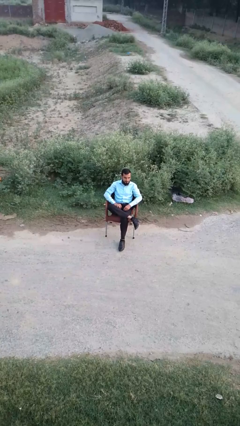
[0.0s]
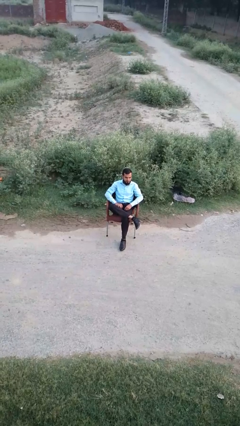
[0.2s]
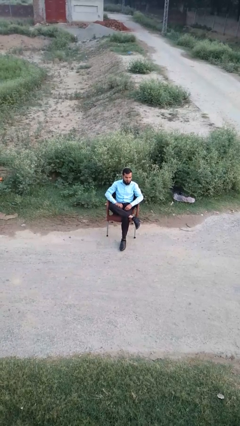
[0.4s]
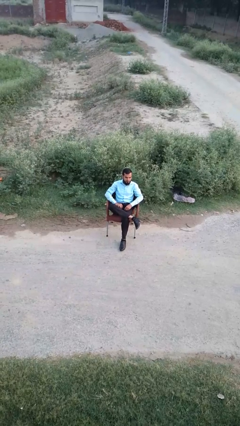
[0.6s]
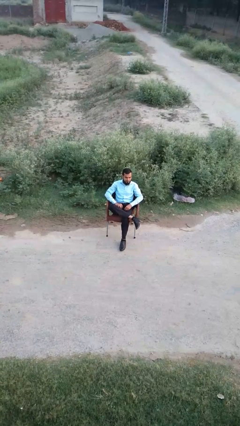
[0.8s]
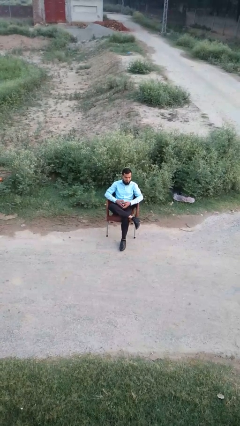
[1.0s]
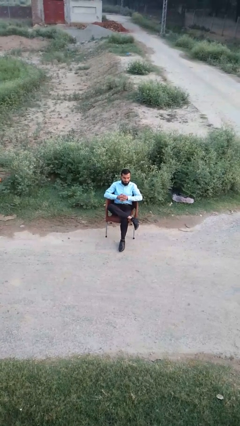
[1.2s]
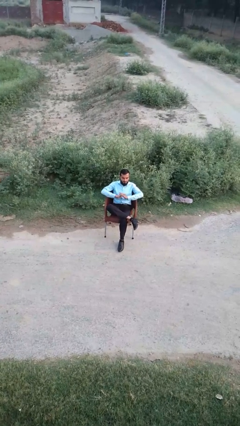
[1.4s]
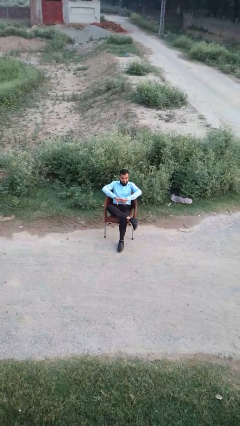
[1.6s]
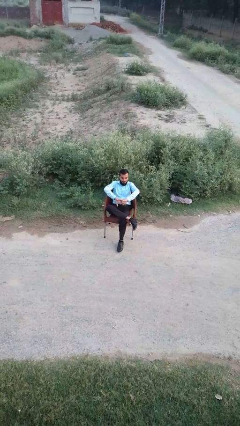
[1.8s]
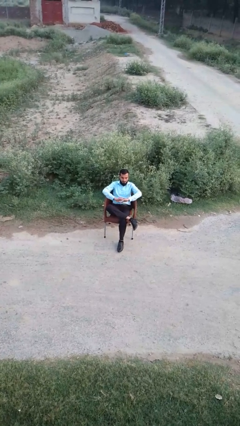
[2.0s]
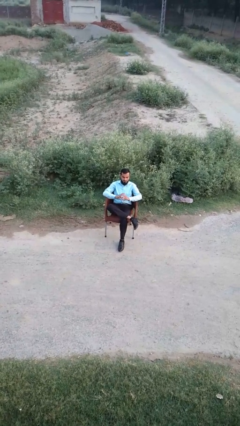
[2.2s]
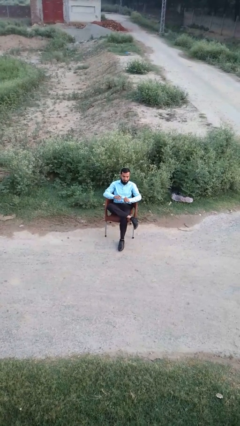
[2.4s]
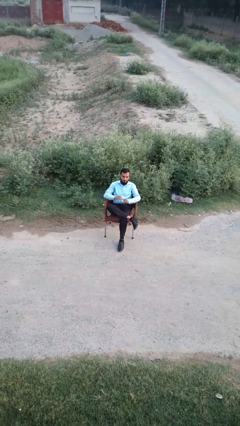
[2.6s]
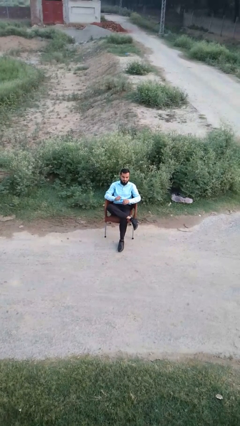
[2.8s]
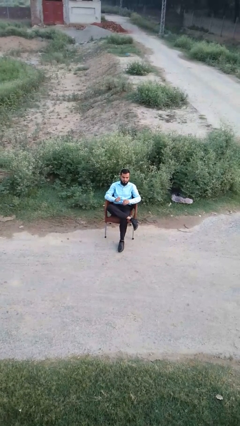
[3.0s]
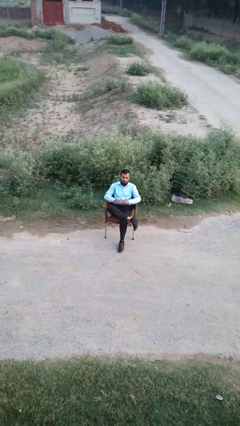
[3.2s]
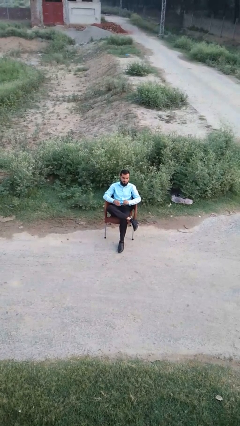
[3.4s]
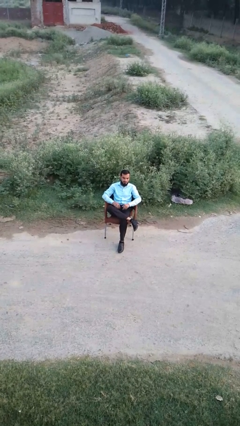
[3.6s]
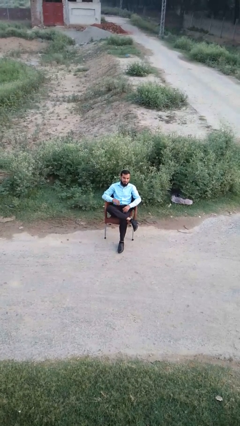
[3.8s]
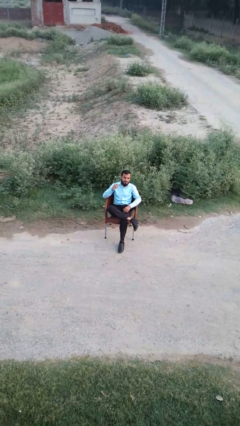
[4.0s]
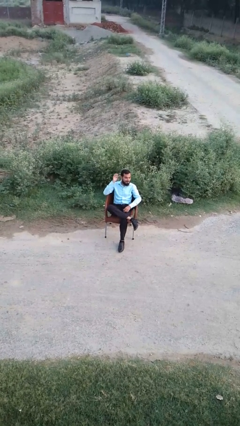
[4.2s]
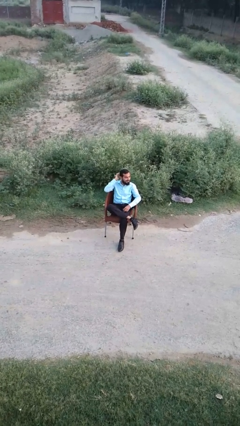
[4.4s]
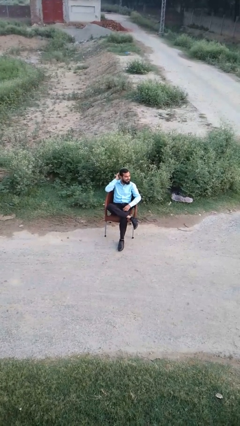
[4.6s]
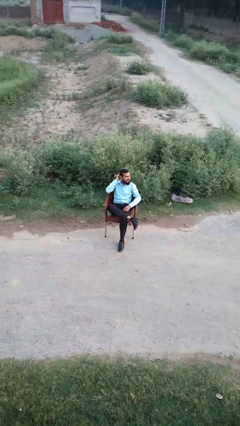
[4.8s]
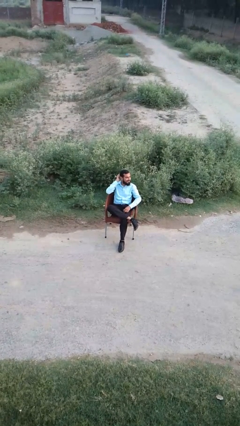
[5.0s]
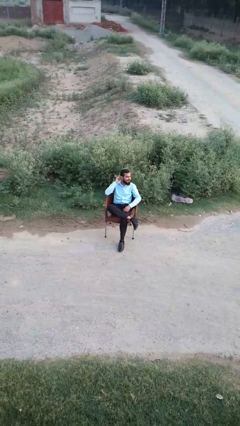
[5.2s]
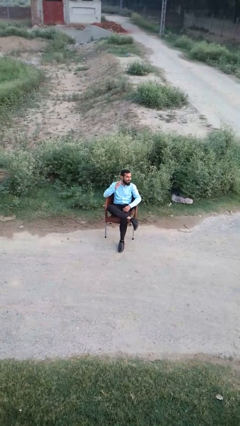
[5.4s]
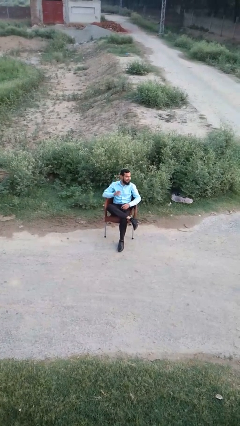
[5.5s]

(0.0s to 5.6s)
person cracks knuckles

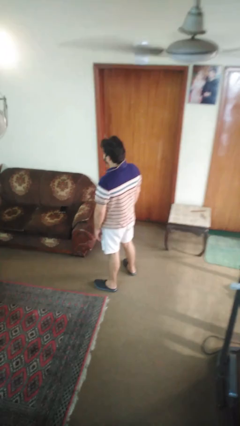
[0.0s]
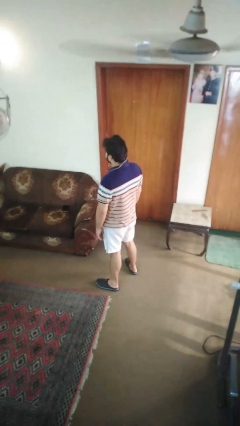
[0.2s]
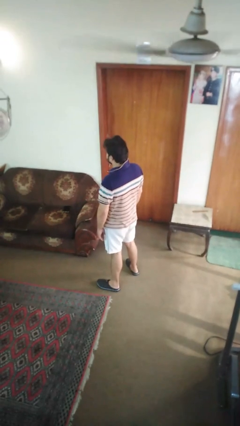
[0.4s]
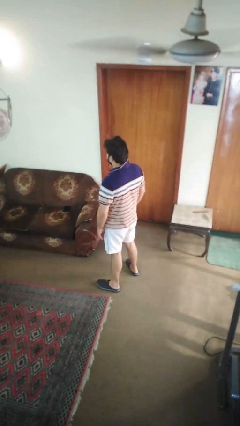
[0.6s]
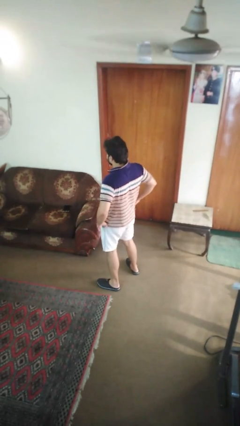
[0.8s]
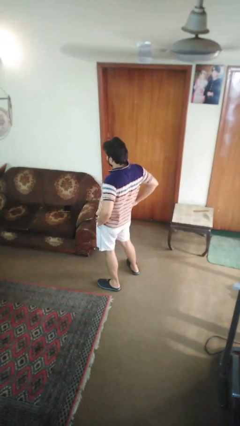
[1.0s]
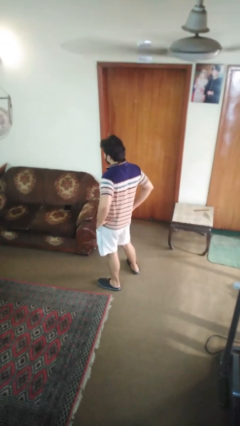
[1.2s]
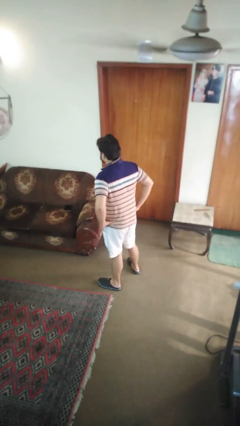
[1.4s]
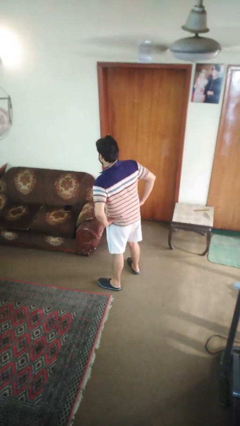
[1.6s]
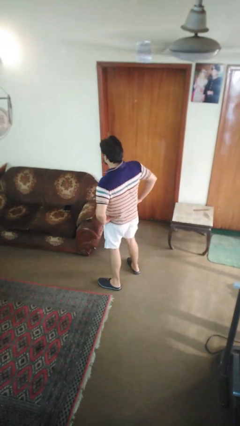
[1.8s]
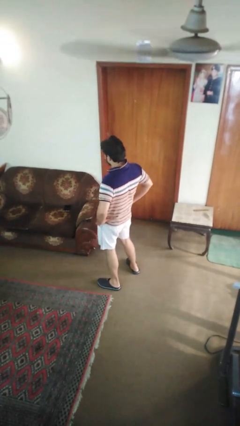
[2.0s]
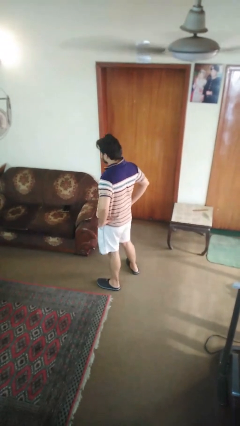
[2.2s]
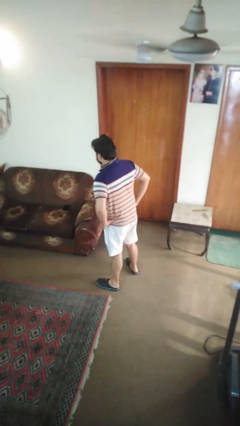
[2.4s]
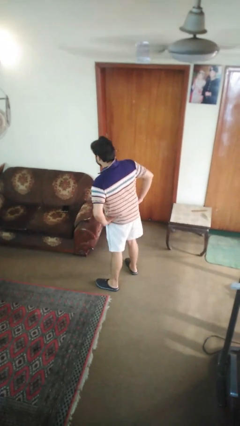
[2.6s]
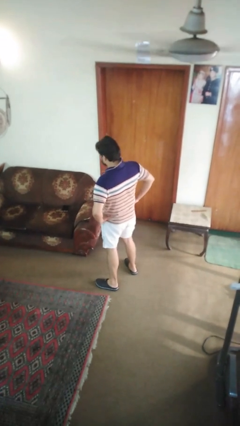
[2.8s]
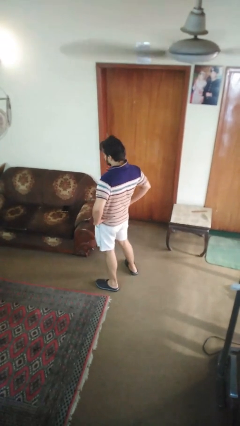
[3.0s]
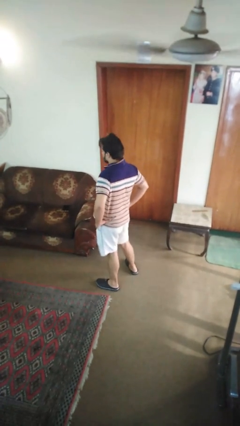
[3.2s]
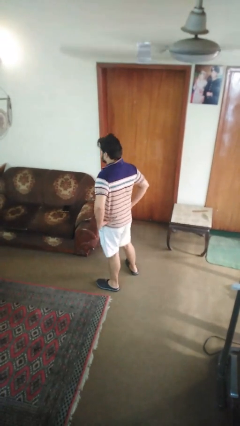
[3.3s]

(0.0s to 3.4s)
person wiggles hips

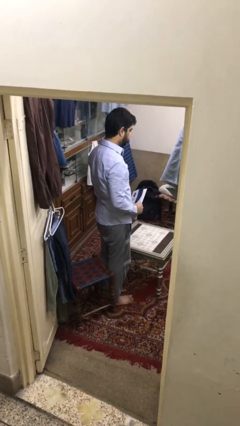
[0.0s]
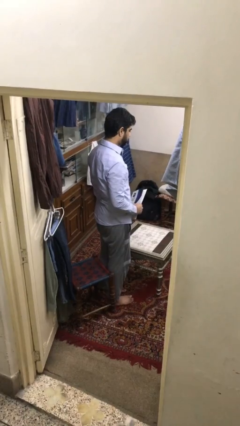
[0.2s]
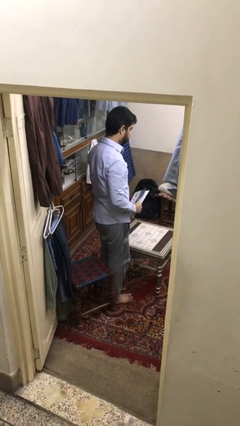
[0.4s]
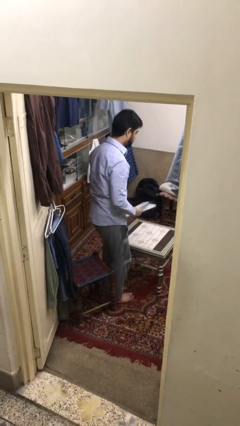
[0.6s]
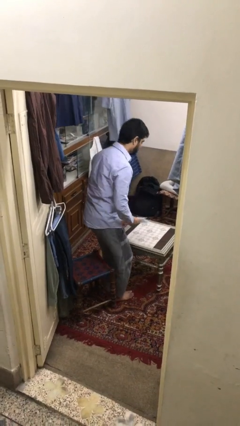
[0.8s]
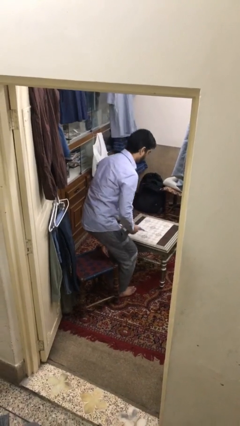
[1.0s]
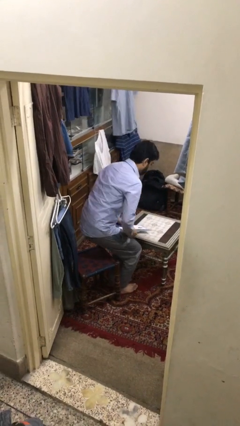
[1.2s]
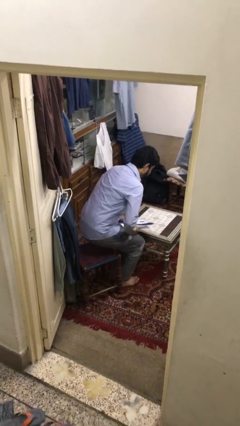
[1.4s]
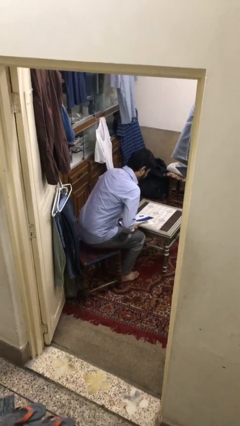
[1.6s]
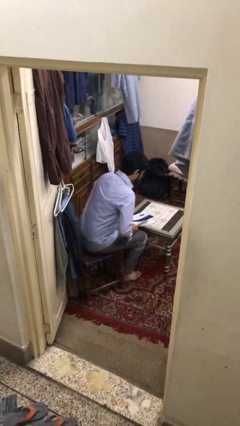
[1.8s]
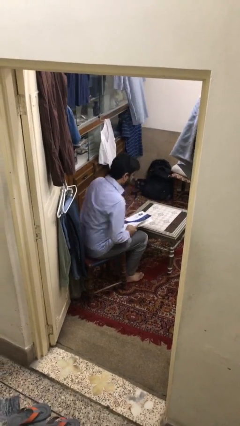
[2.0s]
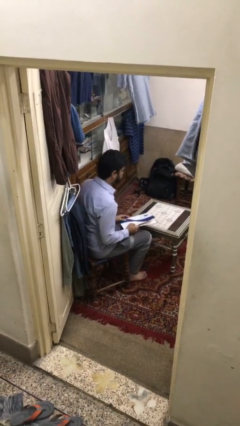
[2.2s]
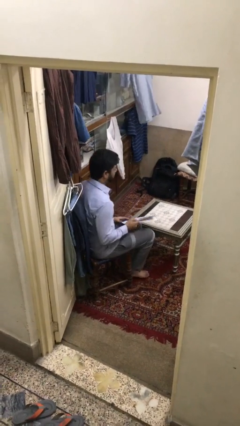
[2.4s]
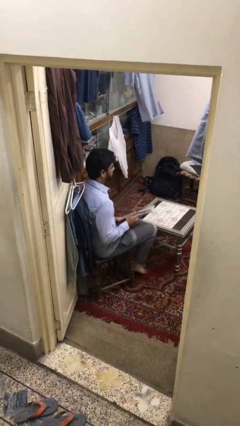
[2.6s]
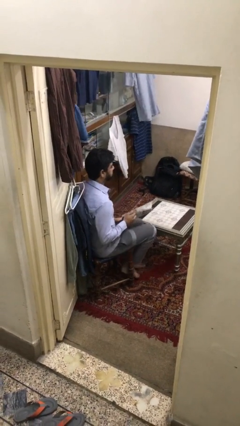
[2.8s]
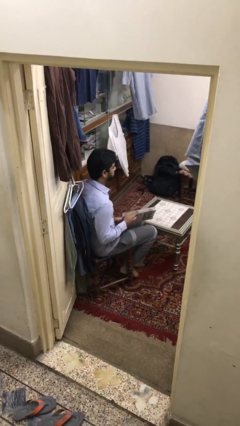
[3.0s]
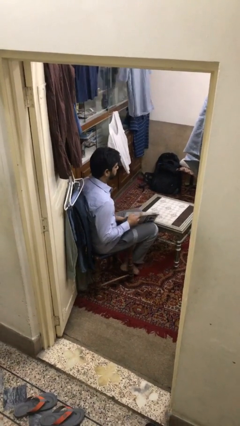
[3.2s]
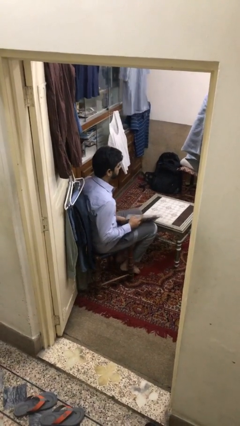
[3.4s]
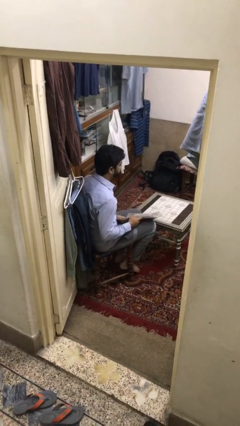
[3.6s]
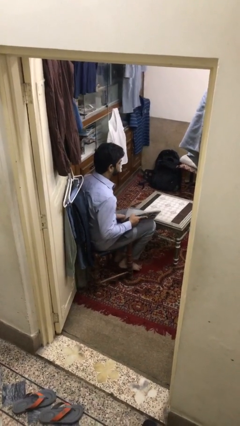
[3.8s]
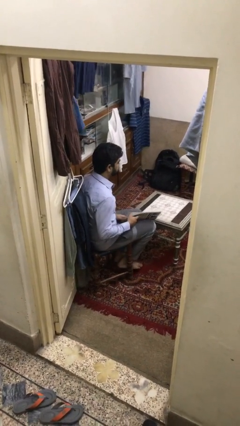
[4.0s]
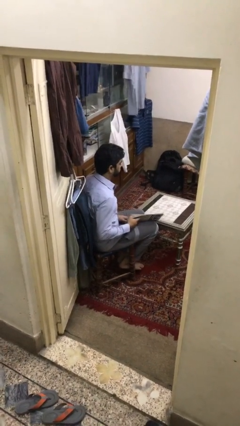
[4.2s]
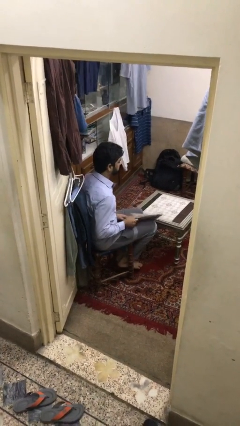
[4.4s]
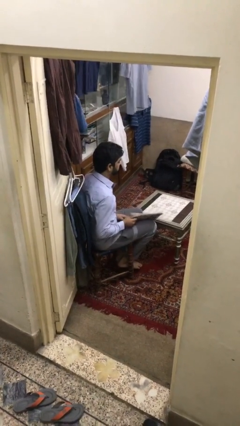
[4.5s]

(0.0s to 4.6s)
person sits down

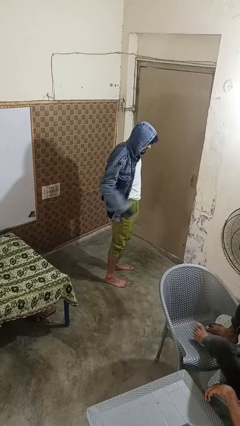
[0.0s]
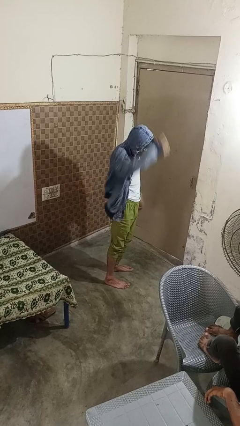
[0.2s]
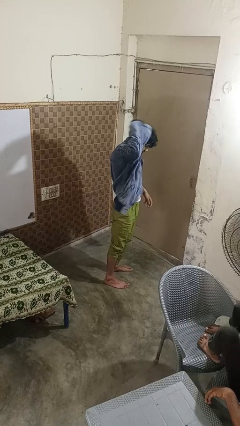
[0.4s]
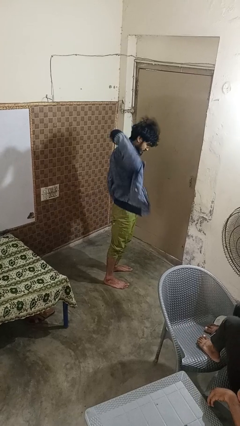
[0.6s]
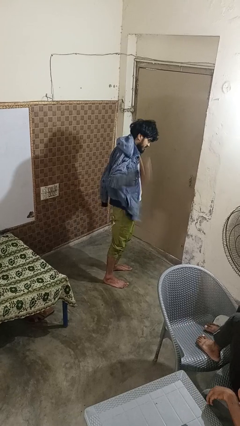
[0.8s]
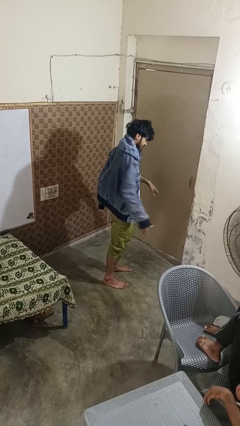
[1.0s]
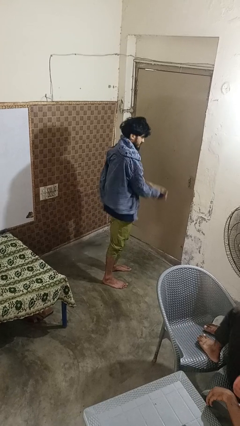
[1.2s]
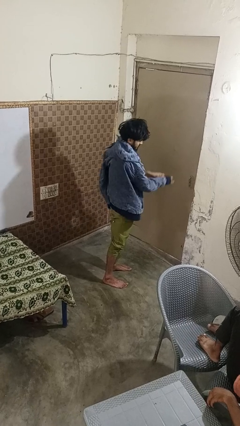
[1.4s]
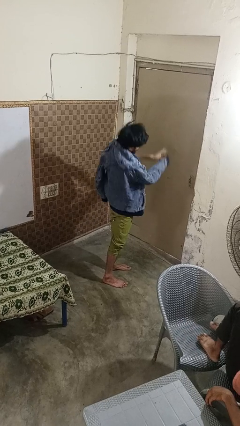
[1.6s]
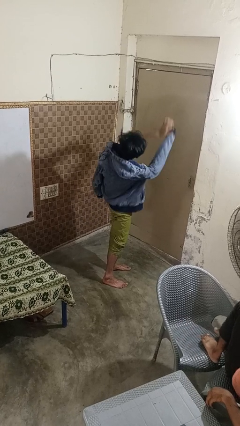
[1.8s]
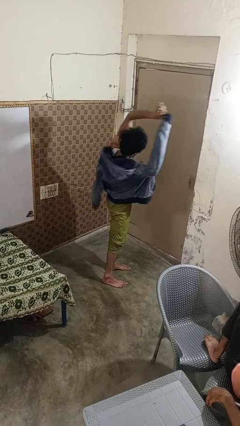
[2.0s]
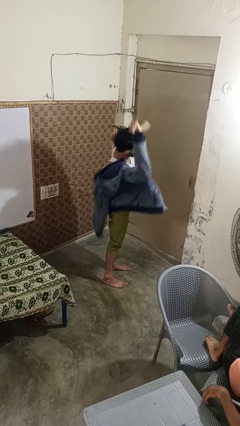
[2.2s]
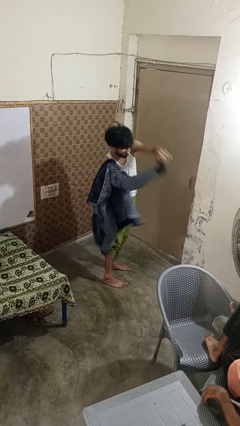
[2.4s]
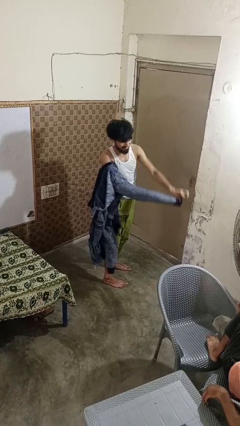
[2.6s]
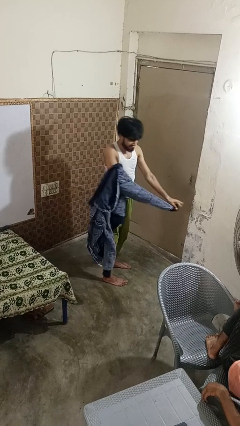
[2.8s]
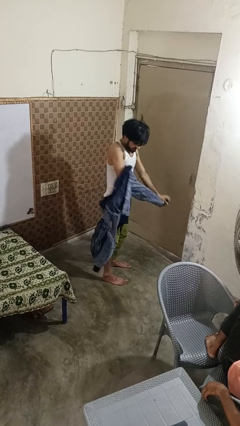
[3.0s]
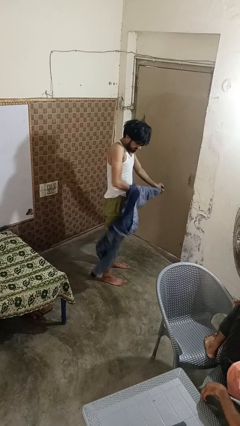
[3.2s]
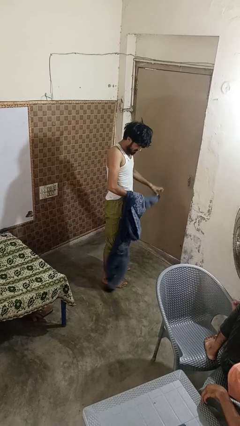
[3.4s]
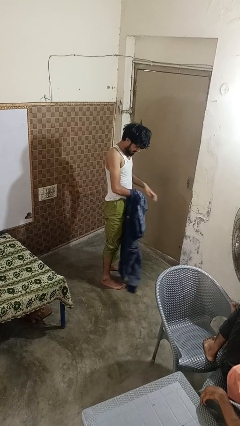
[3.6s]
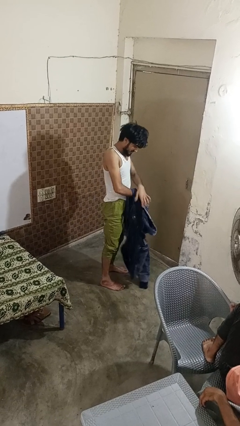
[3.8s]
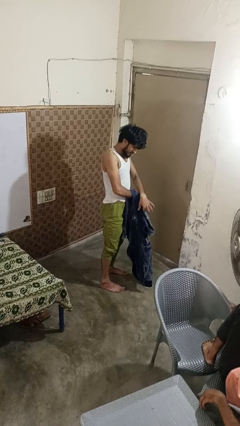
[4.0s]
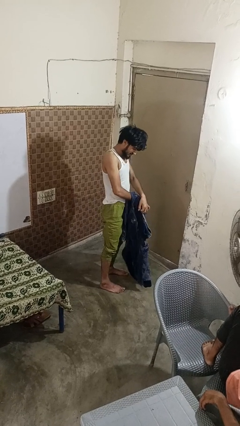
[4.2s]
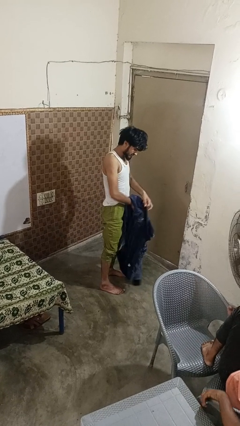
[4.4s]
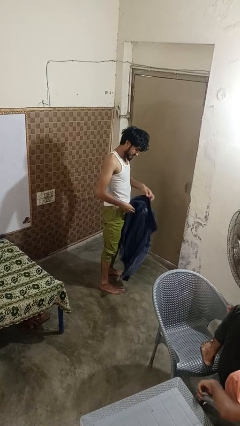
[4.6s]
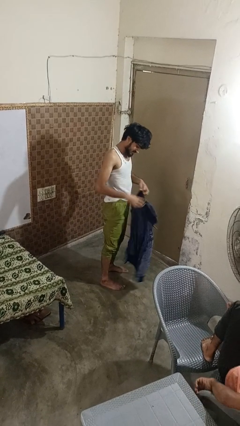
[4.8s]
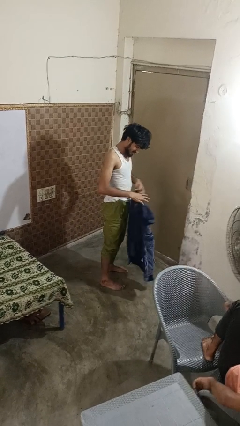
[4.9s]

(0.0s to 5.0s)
person takes off hoodie
